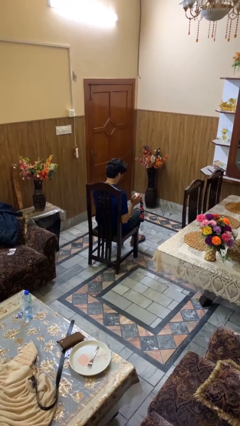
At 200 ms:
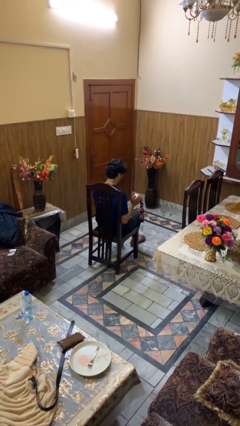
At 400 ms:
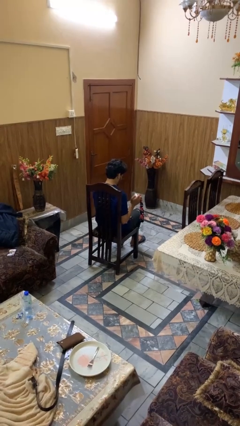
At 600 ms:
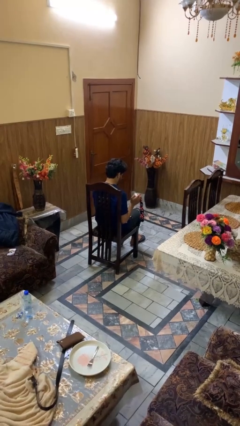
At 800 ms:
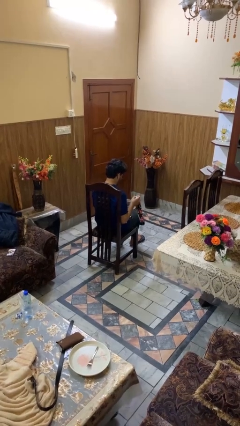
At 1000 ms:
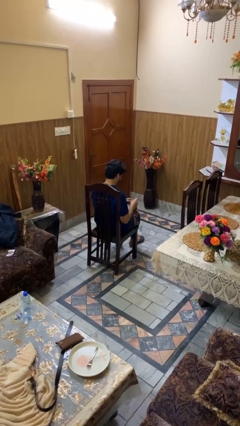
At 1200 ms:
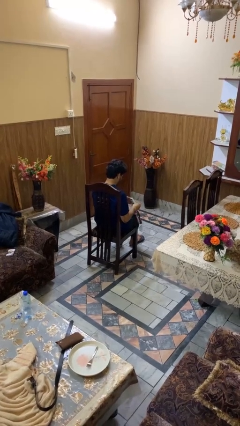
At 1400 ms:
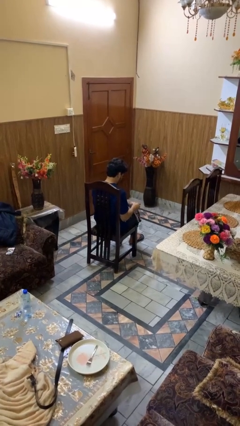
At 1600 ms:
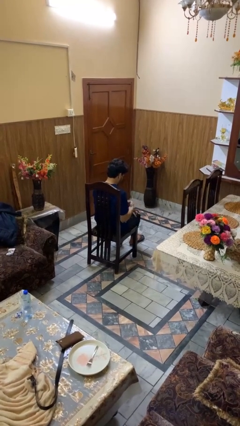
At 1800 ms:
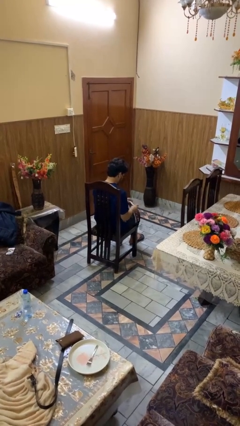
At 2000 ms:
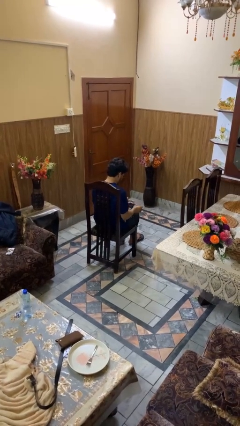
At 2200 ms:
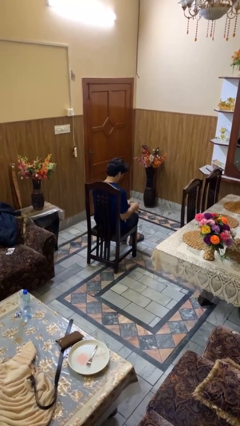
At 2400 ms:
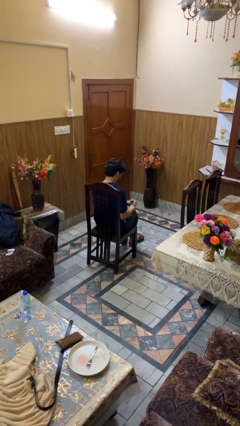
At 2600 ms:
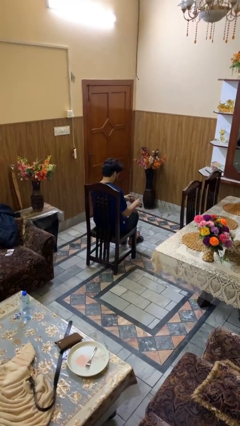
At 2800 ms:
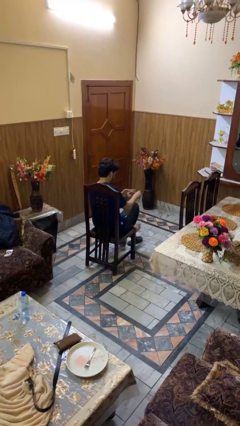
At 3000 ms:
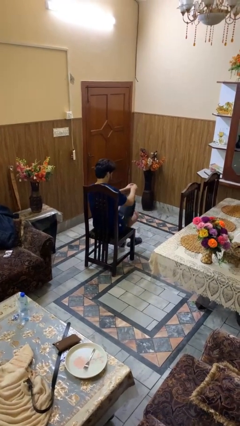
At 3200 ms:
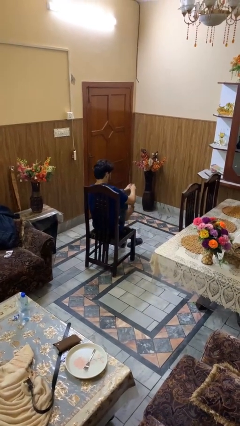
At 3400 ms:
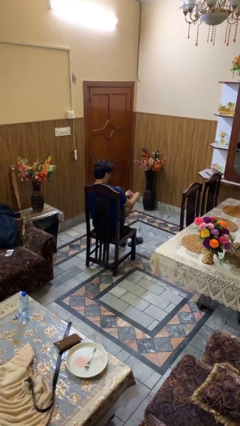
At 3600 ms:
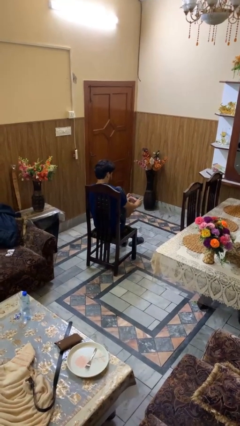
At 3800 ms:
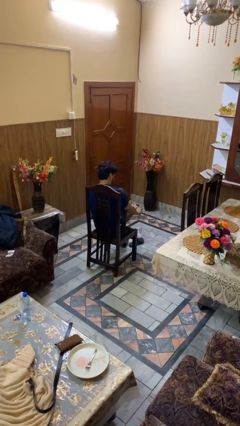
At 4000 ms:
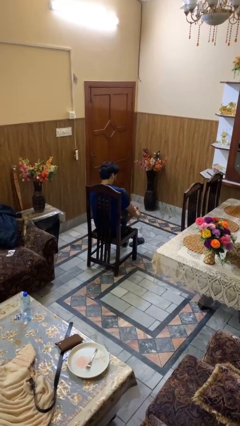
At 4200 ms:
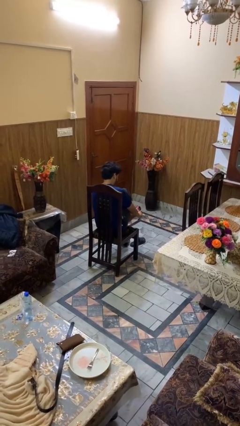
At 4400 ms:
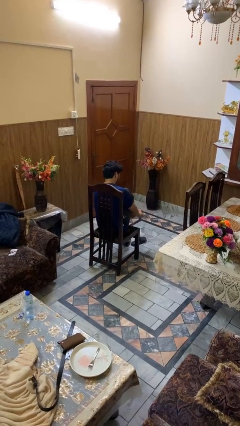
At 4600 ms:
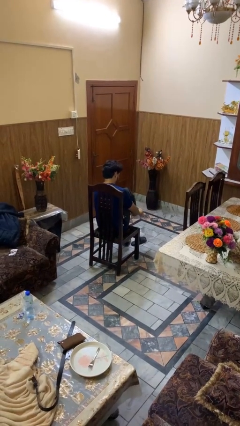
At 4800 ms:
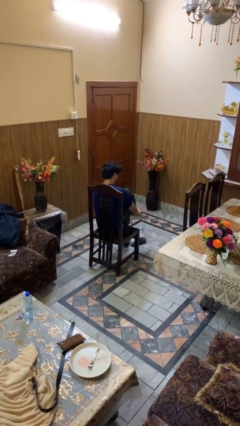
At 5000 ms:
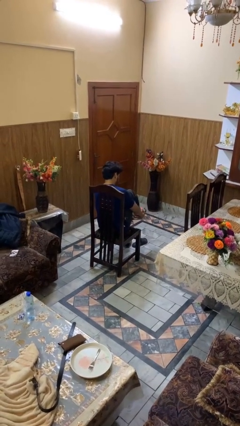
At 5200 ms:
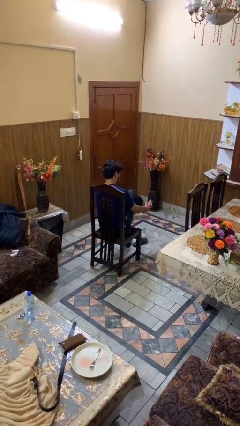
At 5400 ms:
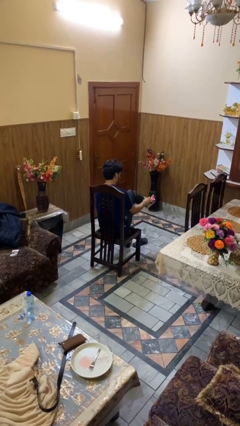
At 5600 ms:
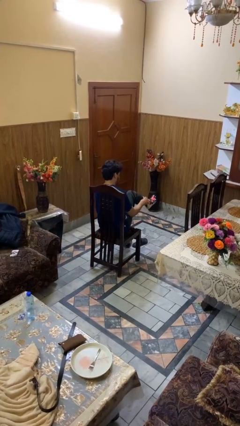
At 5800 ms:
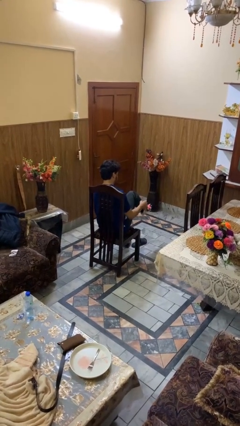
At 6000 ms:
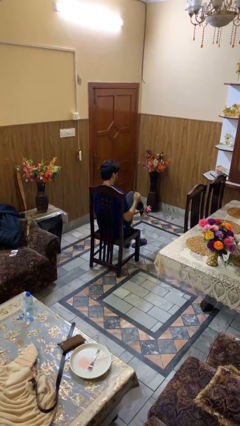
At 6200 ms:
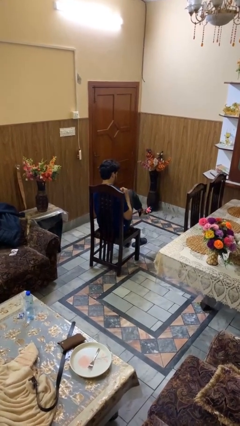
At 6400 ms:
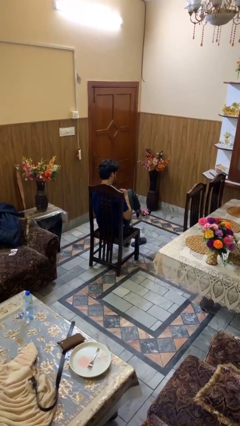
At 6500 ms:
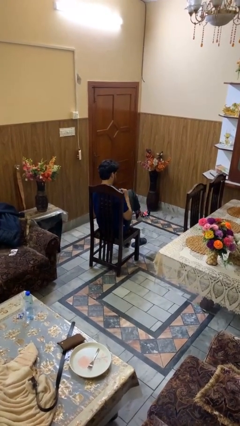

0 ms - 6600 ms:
person puts on socks

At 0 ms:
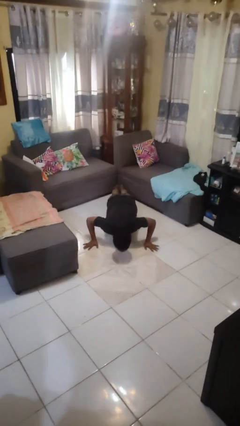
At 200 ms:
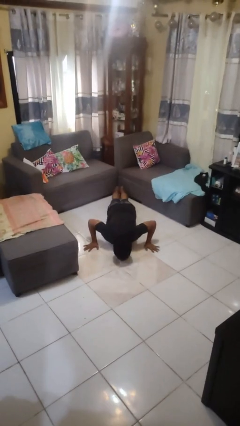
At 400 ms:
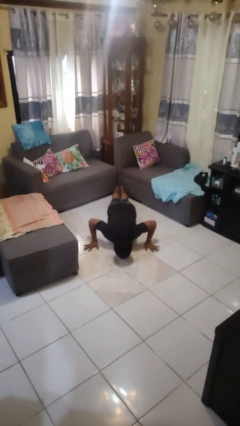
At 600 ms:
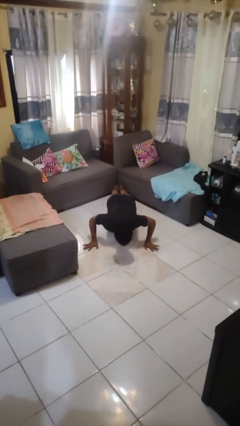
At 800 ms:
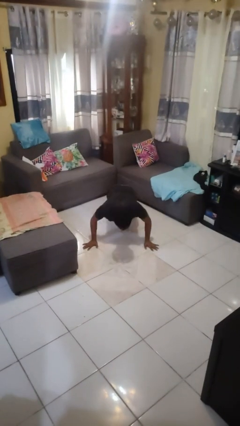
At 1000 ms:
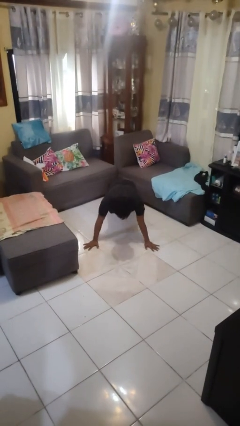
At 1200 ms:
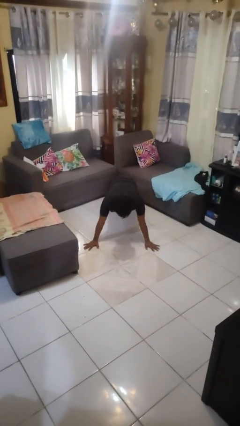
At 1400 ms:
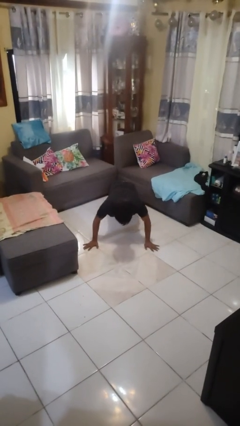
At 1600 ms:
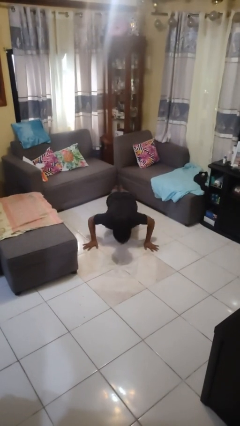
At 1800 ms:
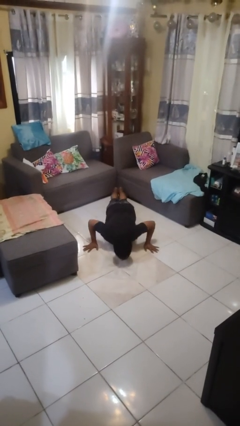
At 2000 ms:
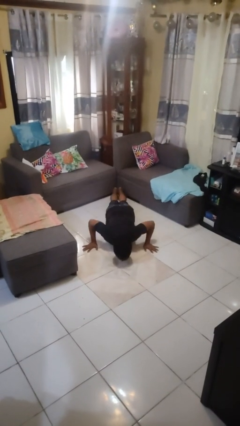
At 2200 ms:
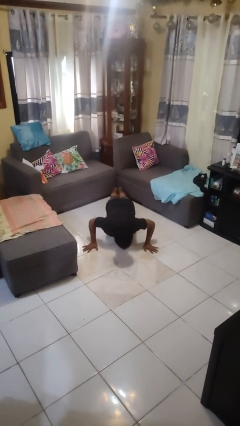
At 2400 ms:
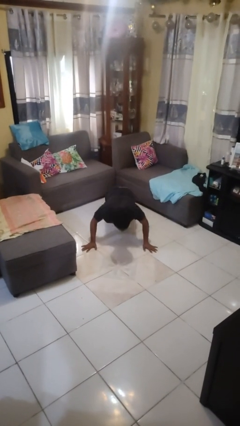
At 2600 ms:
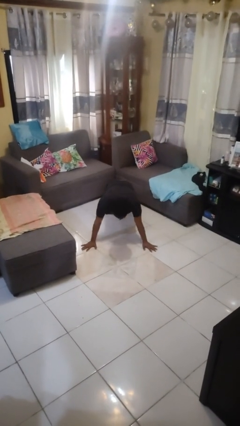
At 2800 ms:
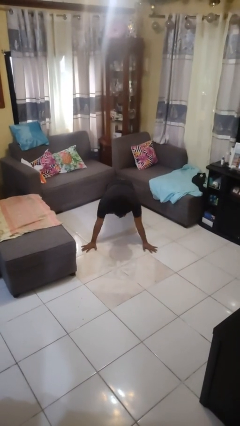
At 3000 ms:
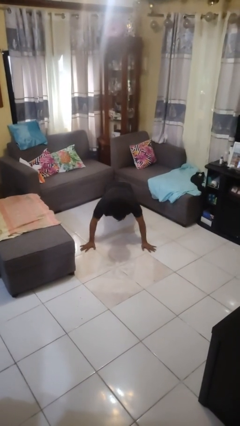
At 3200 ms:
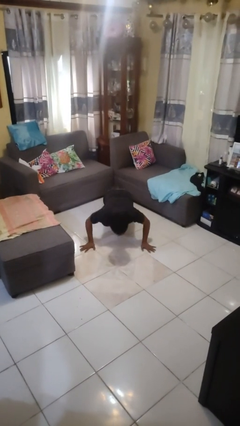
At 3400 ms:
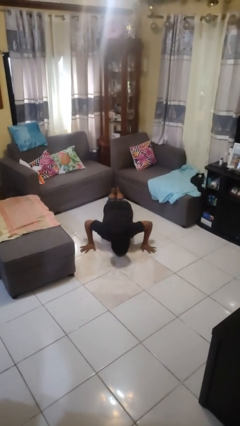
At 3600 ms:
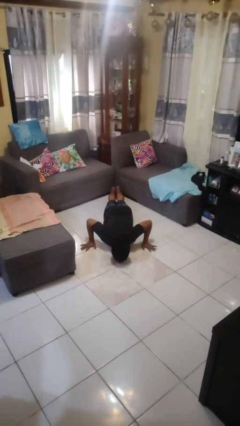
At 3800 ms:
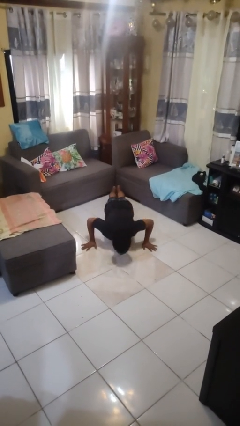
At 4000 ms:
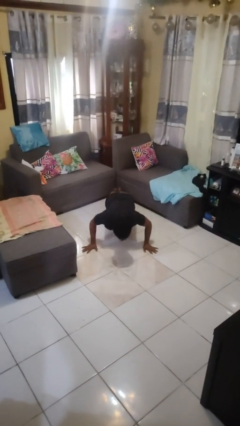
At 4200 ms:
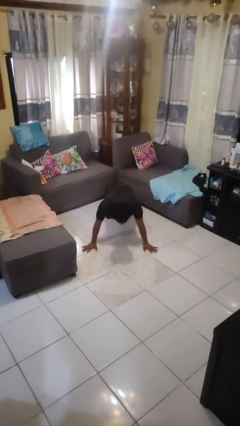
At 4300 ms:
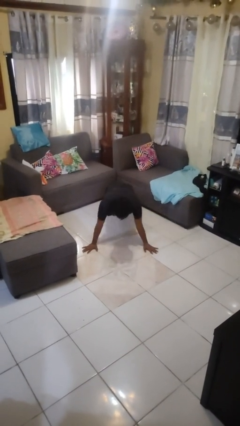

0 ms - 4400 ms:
person exercises with pushup

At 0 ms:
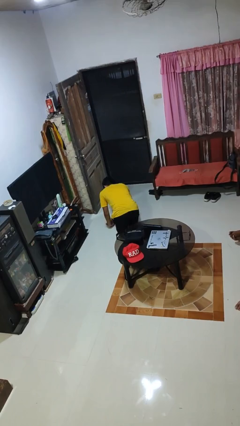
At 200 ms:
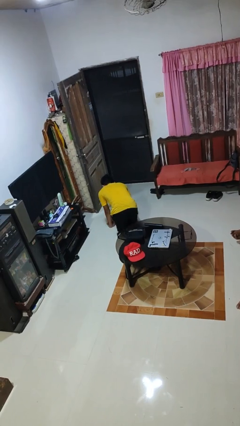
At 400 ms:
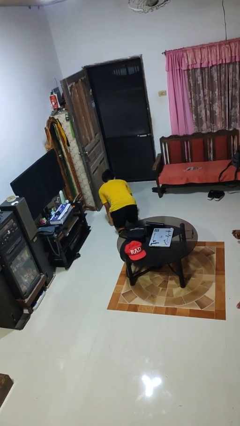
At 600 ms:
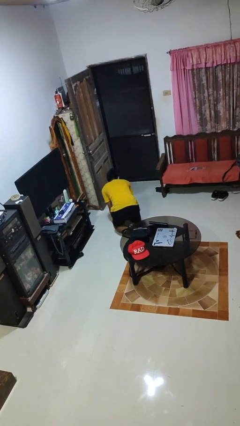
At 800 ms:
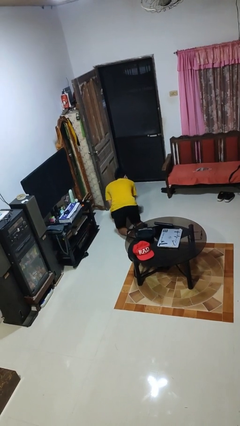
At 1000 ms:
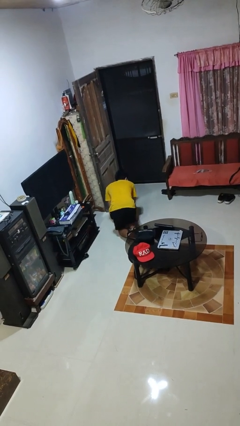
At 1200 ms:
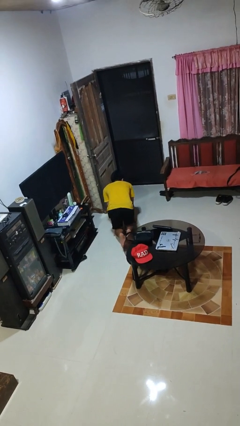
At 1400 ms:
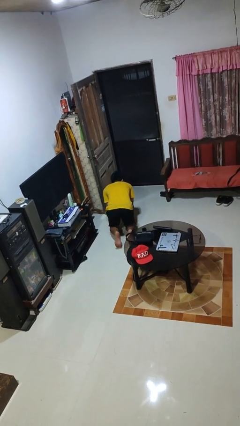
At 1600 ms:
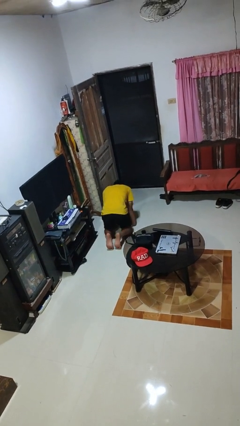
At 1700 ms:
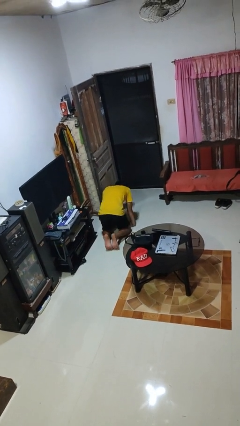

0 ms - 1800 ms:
person crawls

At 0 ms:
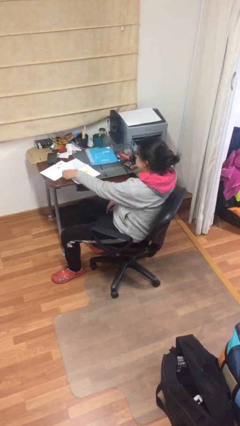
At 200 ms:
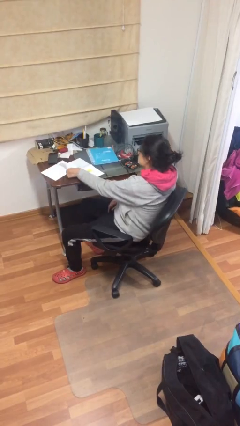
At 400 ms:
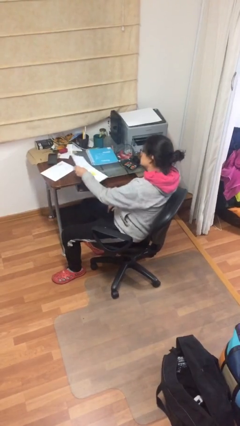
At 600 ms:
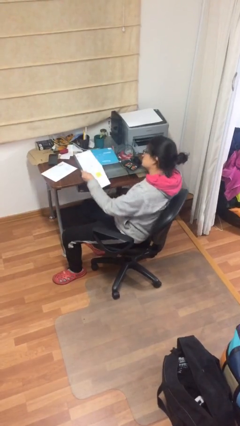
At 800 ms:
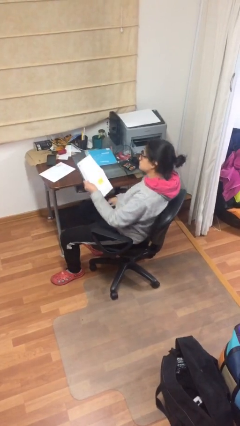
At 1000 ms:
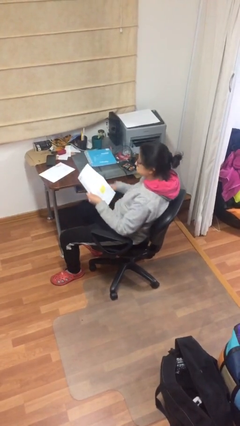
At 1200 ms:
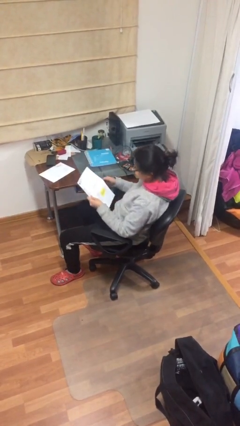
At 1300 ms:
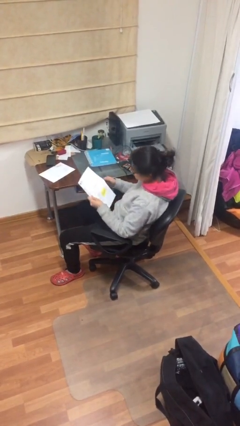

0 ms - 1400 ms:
person picks up object from table

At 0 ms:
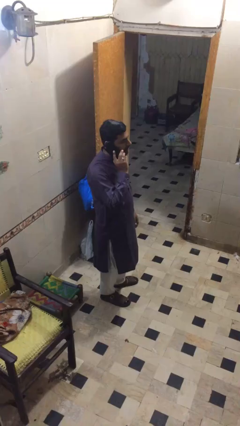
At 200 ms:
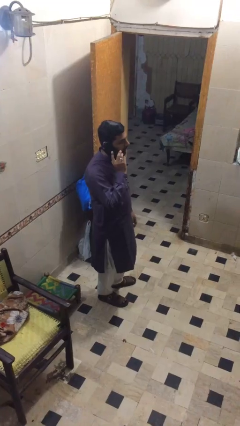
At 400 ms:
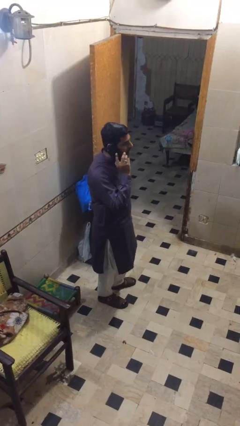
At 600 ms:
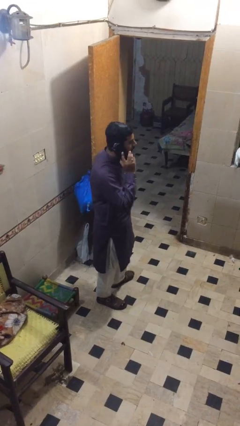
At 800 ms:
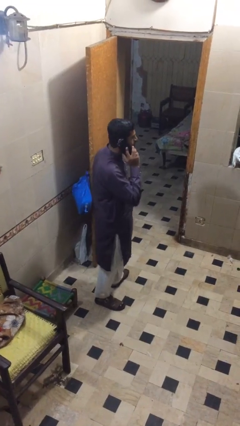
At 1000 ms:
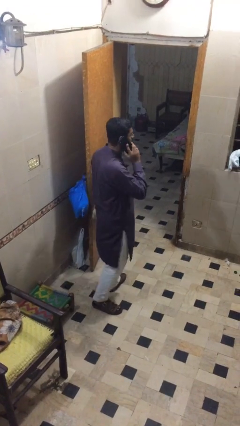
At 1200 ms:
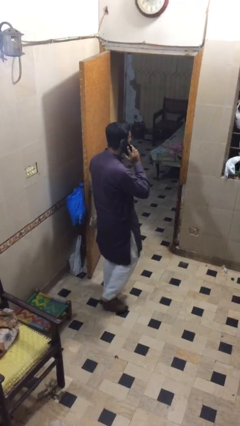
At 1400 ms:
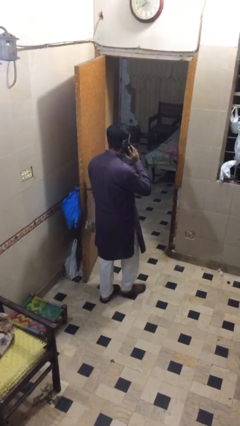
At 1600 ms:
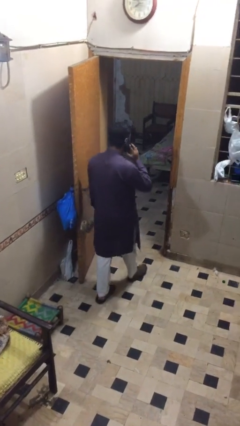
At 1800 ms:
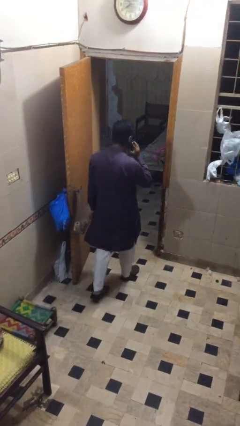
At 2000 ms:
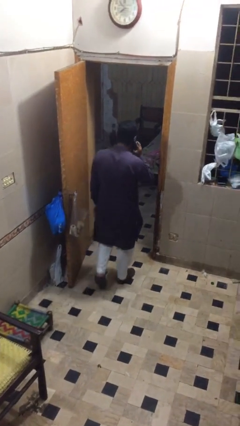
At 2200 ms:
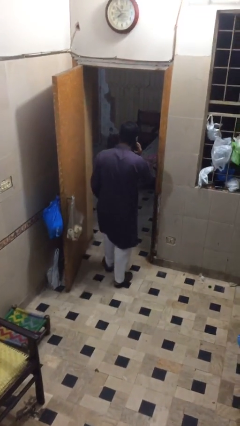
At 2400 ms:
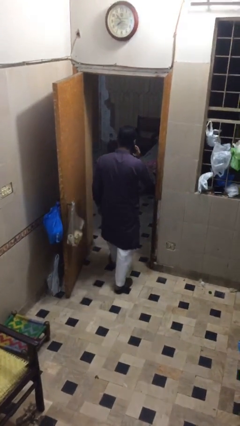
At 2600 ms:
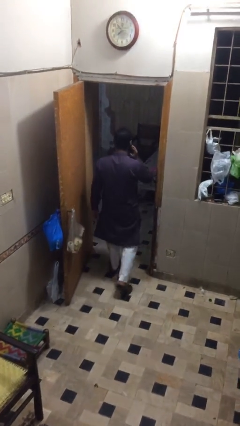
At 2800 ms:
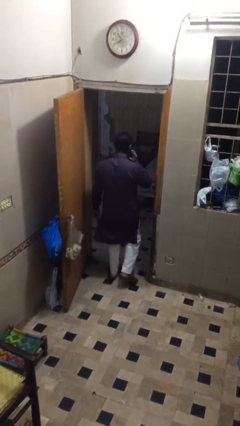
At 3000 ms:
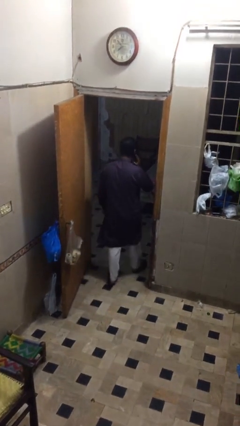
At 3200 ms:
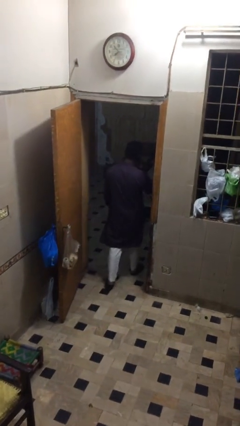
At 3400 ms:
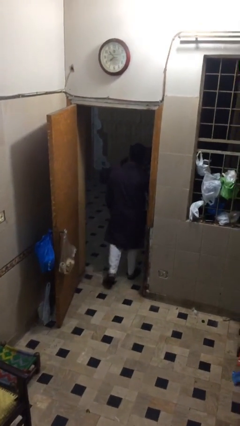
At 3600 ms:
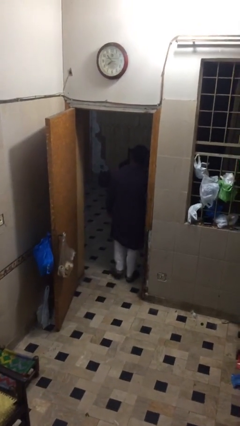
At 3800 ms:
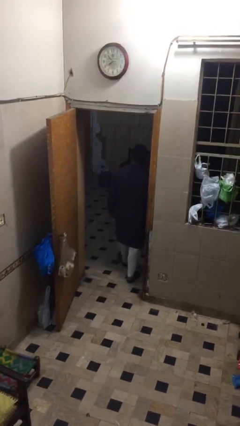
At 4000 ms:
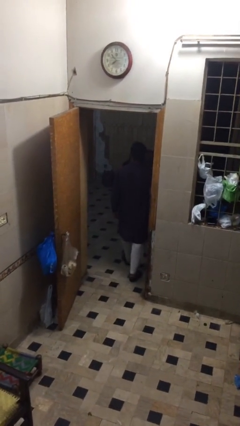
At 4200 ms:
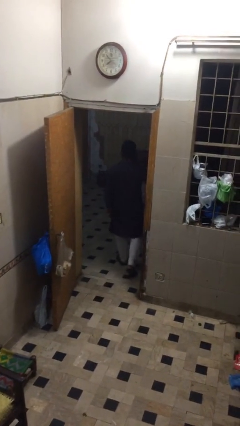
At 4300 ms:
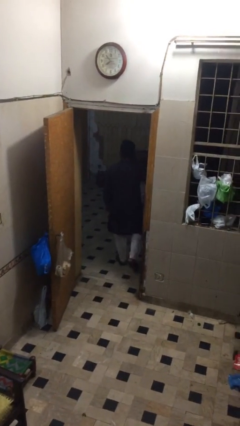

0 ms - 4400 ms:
person exits scene through structure
